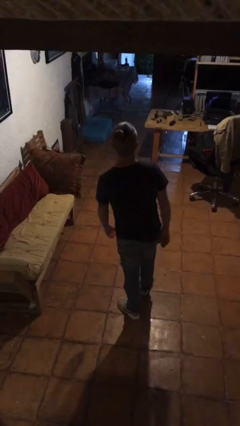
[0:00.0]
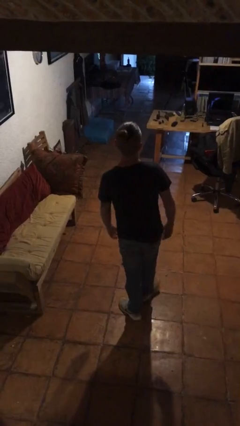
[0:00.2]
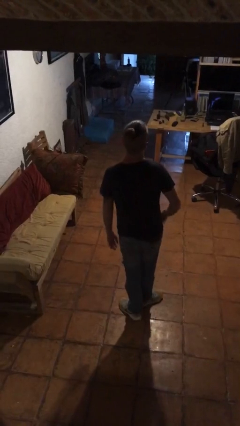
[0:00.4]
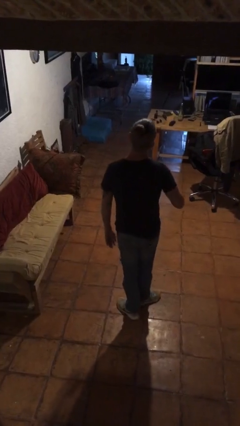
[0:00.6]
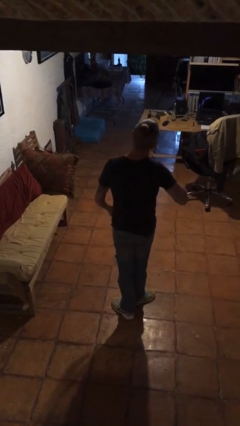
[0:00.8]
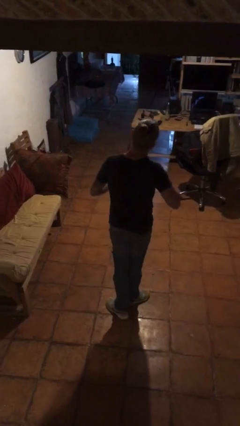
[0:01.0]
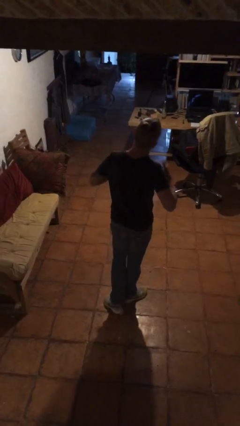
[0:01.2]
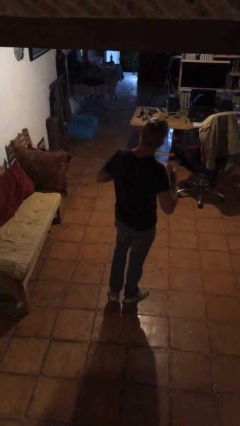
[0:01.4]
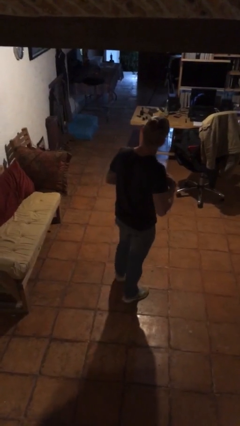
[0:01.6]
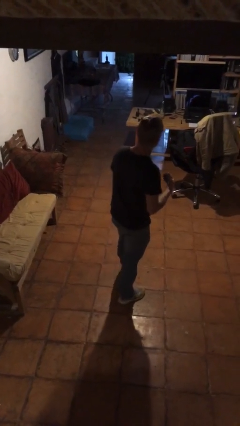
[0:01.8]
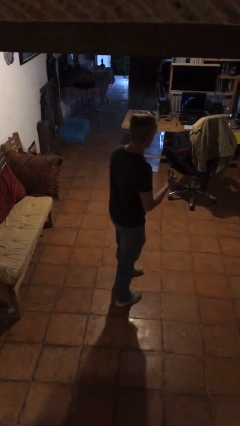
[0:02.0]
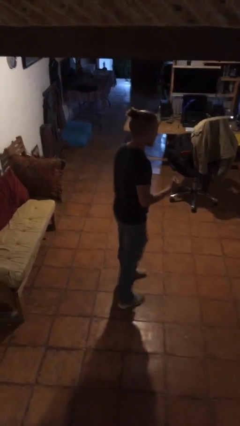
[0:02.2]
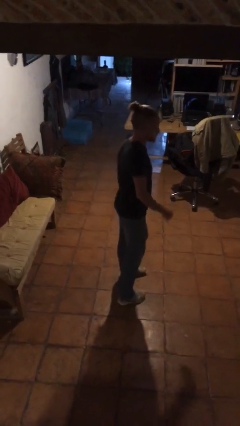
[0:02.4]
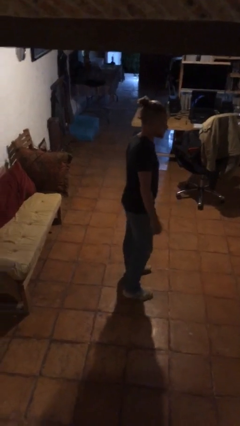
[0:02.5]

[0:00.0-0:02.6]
person drums on chest

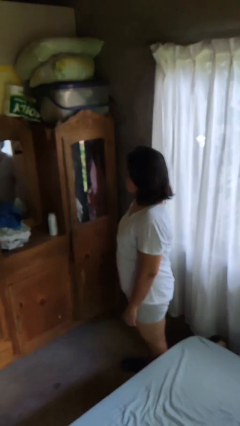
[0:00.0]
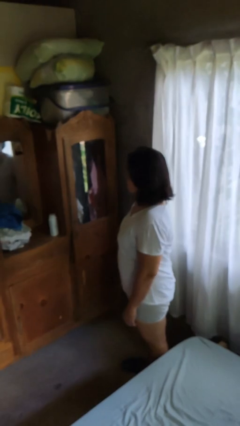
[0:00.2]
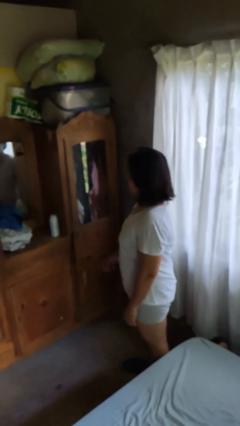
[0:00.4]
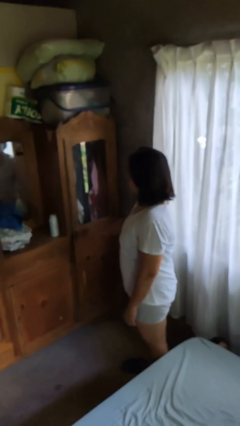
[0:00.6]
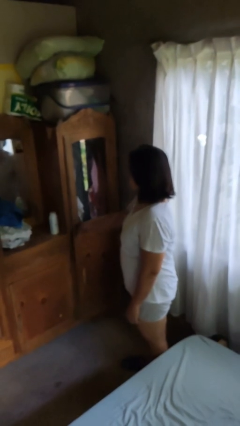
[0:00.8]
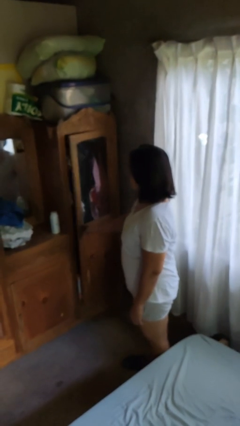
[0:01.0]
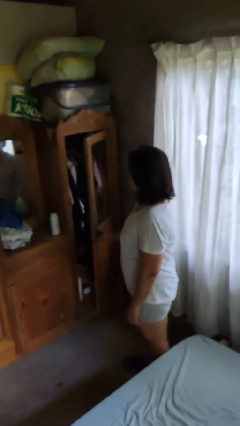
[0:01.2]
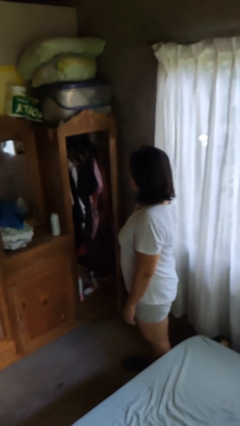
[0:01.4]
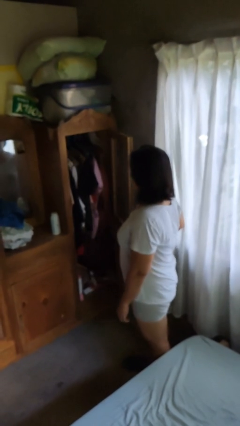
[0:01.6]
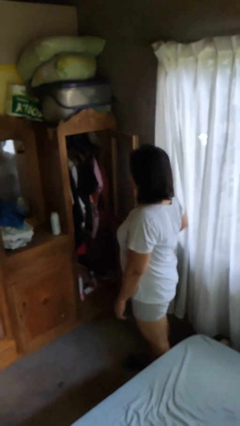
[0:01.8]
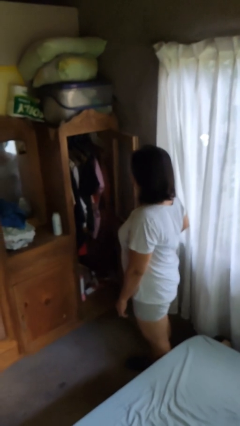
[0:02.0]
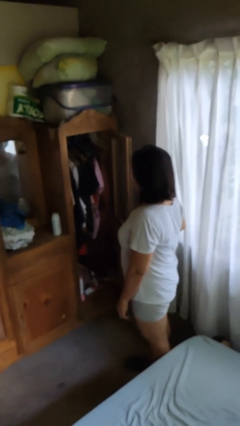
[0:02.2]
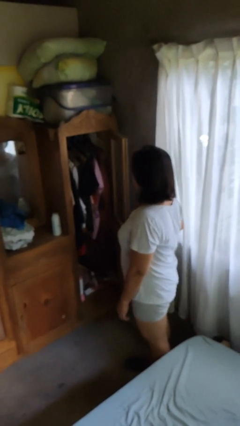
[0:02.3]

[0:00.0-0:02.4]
person opens dresser drawer

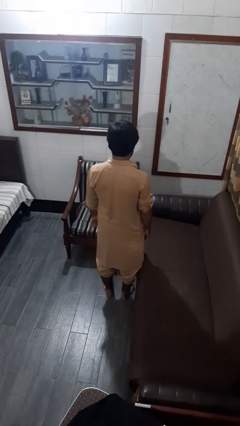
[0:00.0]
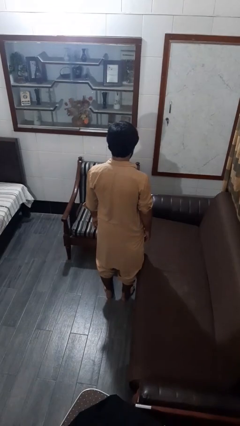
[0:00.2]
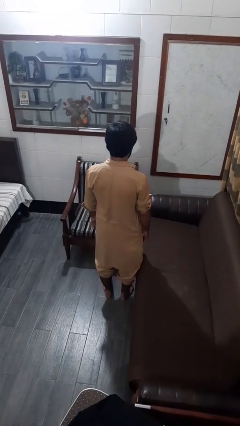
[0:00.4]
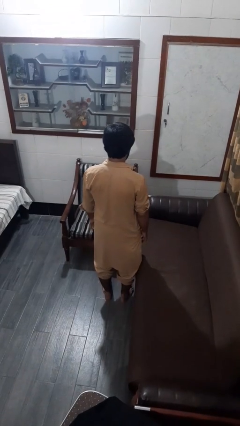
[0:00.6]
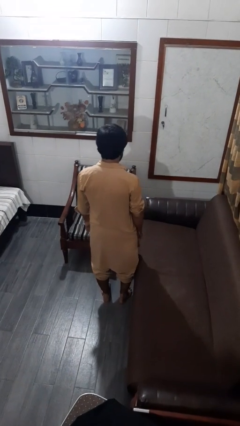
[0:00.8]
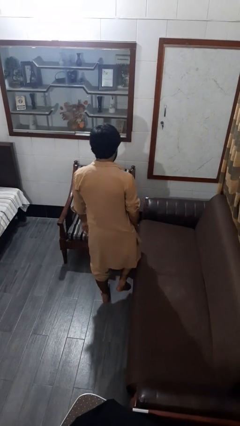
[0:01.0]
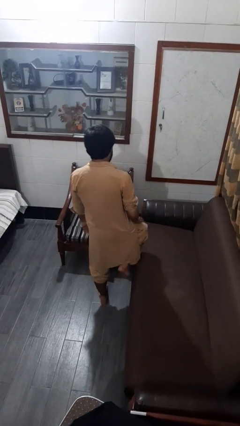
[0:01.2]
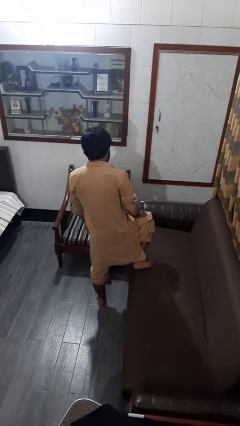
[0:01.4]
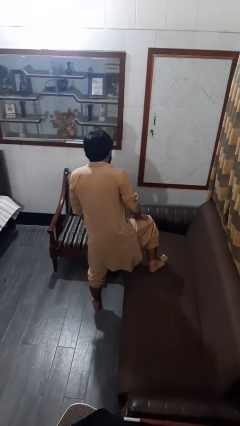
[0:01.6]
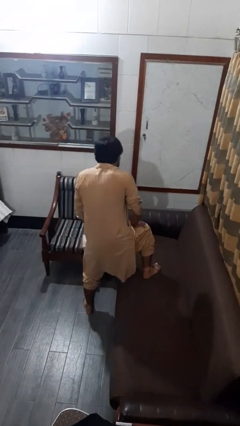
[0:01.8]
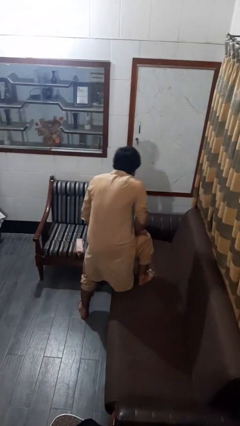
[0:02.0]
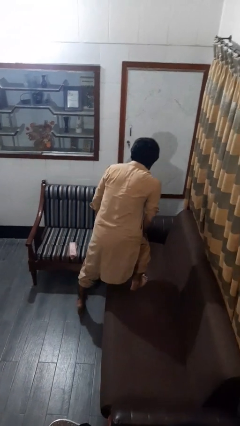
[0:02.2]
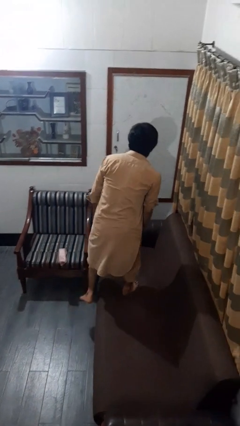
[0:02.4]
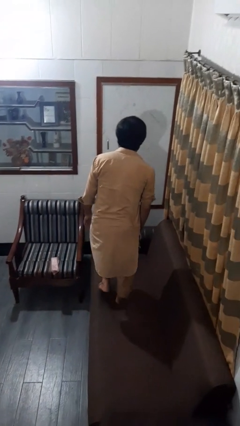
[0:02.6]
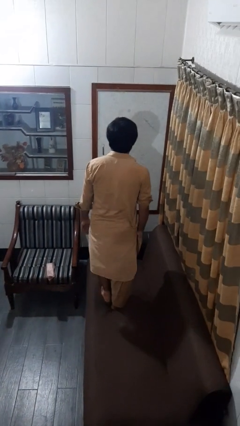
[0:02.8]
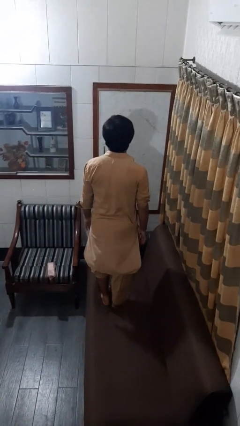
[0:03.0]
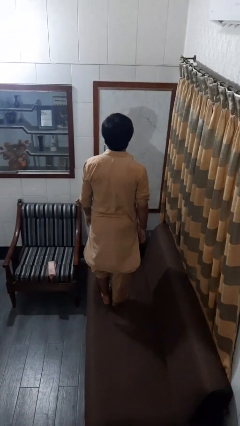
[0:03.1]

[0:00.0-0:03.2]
person climbs on couch

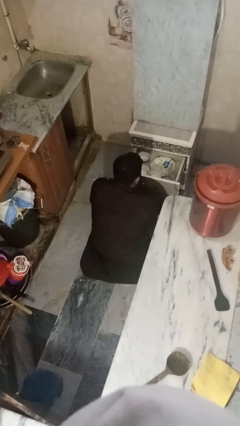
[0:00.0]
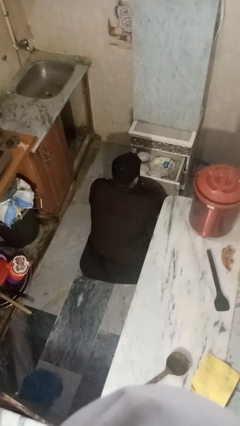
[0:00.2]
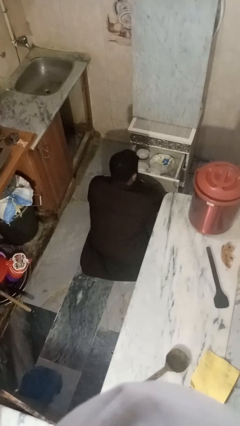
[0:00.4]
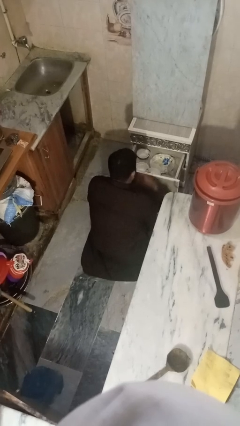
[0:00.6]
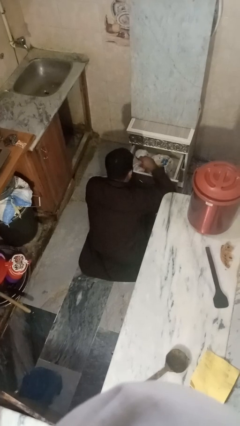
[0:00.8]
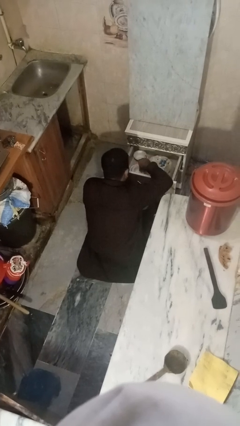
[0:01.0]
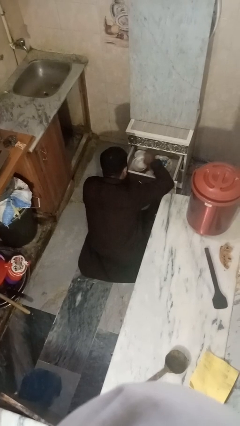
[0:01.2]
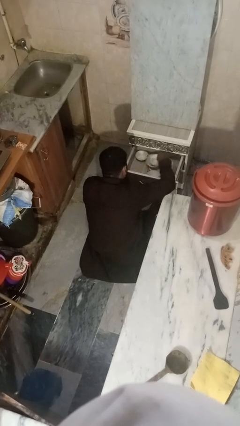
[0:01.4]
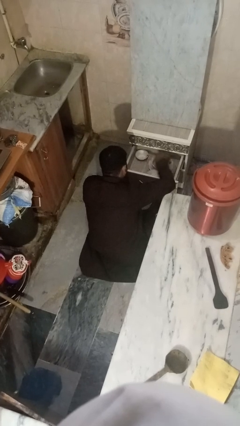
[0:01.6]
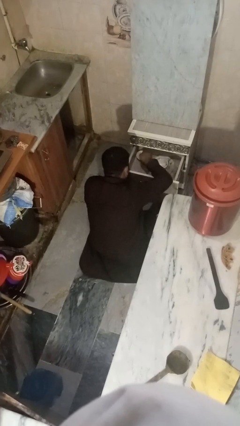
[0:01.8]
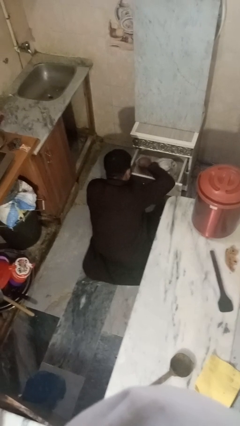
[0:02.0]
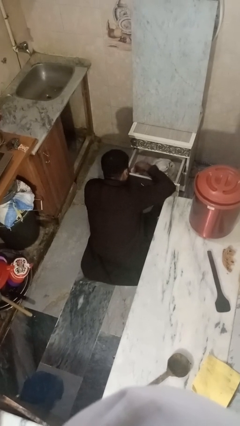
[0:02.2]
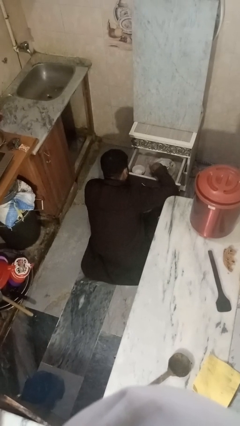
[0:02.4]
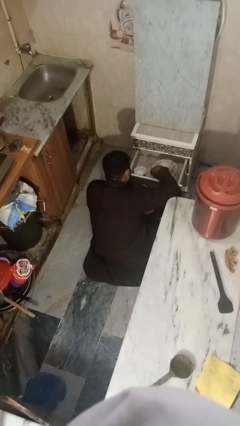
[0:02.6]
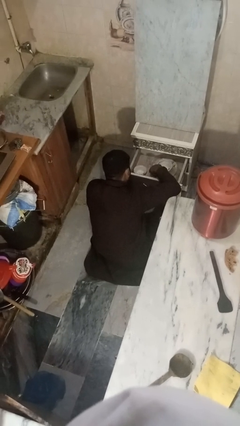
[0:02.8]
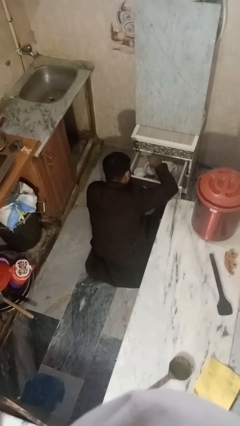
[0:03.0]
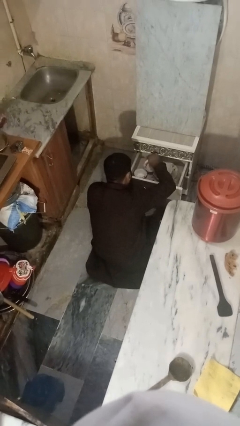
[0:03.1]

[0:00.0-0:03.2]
person searches in kitchen drawer

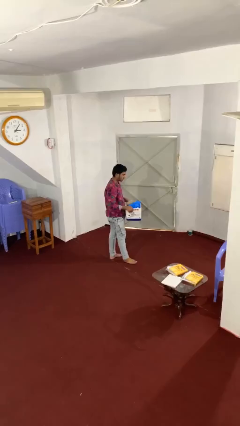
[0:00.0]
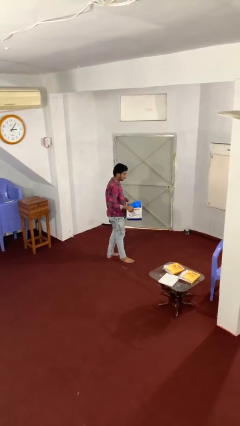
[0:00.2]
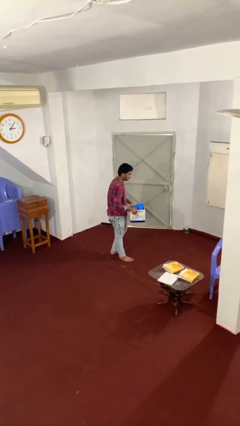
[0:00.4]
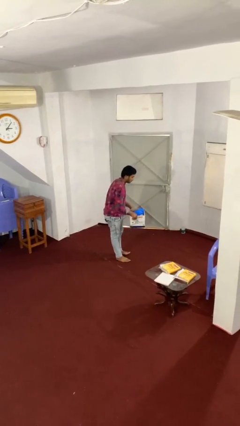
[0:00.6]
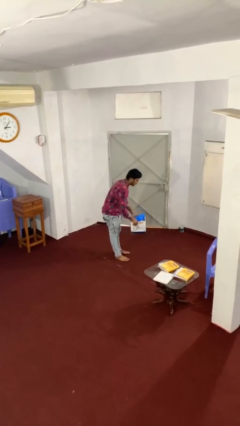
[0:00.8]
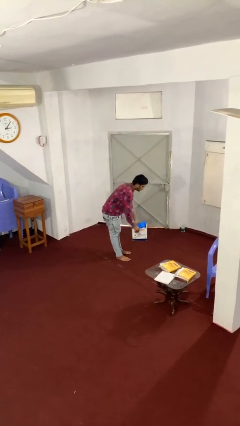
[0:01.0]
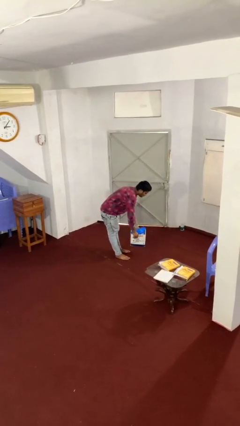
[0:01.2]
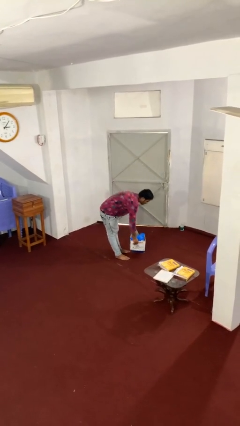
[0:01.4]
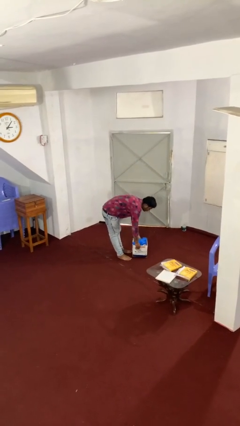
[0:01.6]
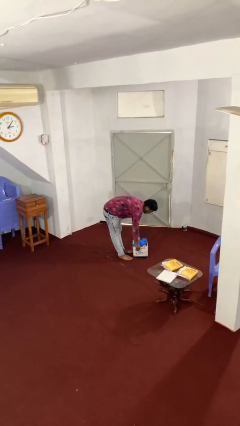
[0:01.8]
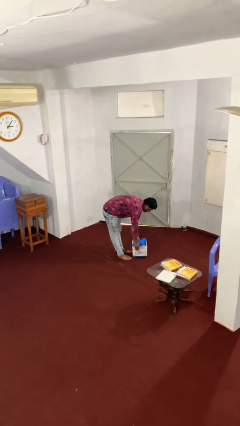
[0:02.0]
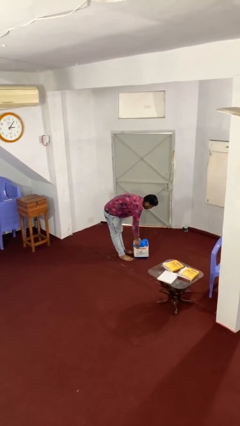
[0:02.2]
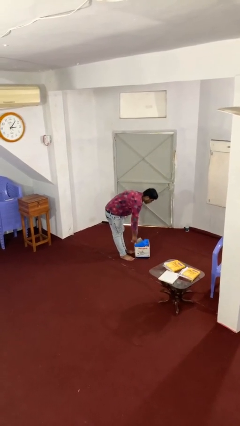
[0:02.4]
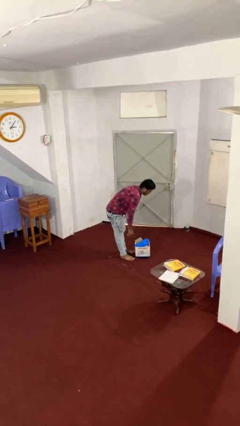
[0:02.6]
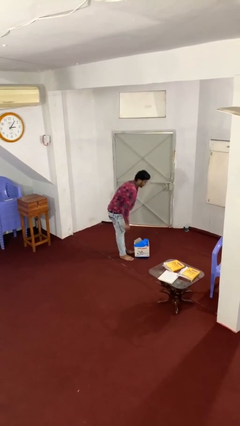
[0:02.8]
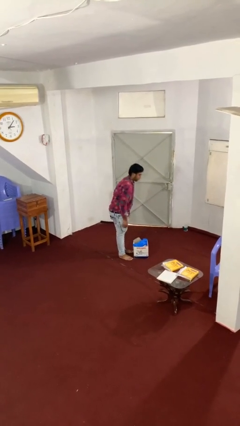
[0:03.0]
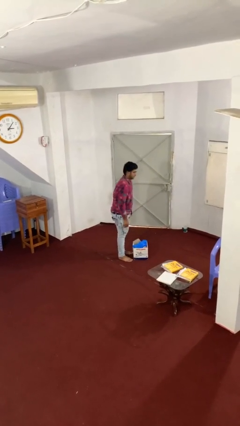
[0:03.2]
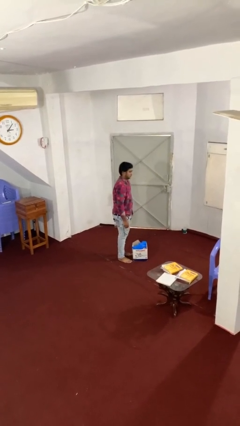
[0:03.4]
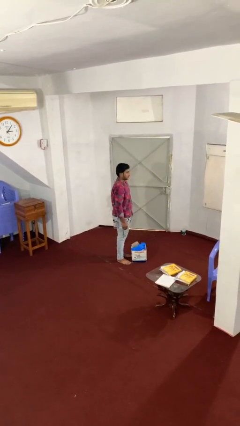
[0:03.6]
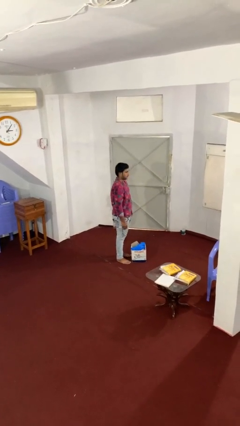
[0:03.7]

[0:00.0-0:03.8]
person puts down object on floor

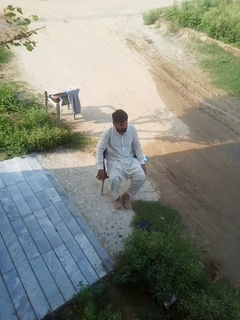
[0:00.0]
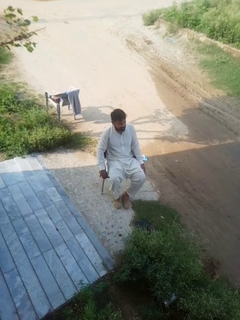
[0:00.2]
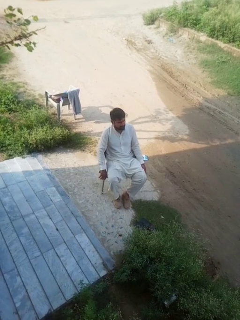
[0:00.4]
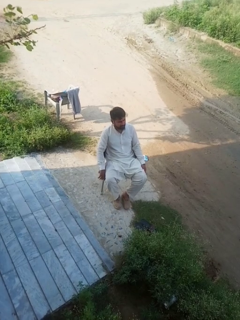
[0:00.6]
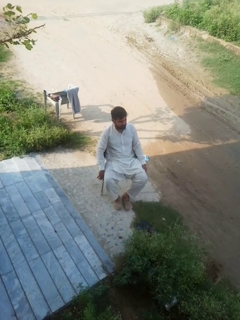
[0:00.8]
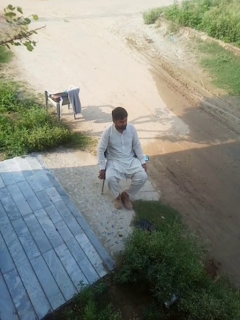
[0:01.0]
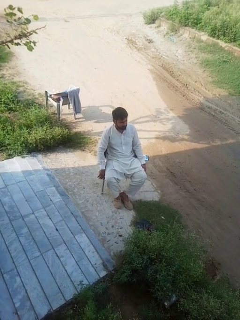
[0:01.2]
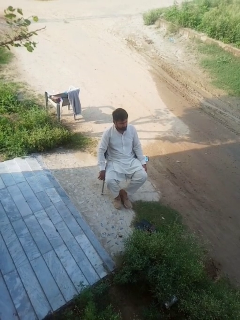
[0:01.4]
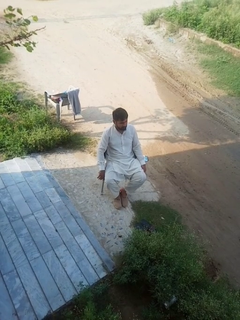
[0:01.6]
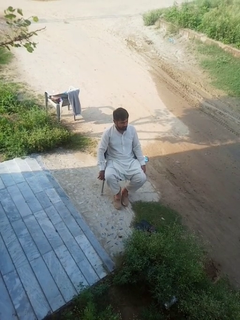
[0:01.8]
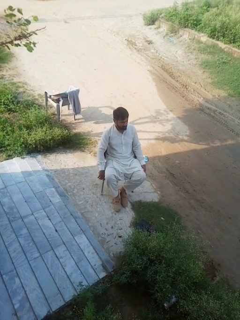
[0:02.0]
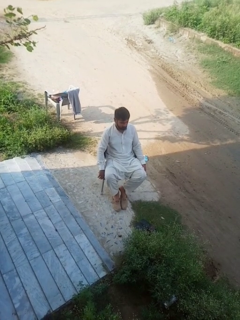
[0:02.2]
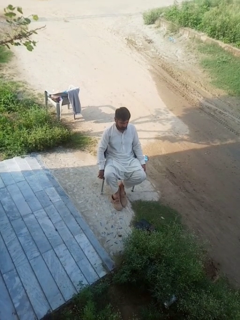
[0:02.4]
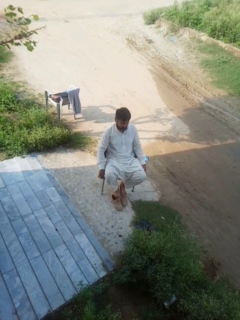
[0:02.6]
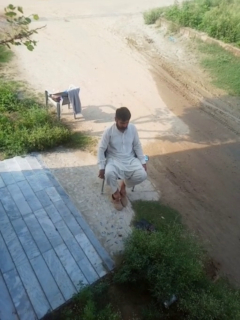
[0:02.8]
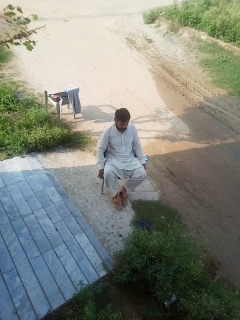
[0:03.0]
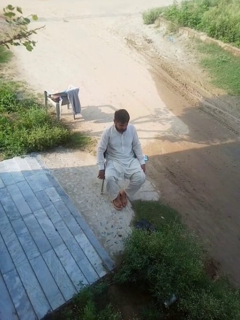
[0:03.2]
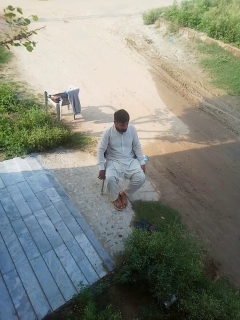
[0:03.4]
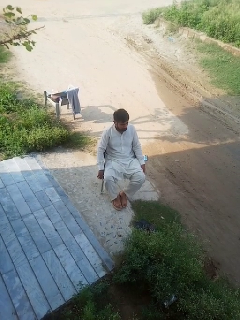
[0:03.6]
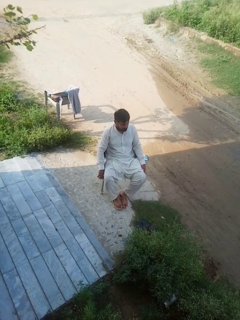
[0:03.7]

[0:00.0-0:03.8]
person takes off shoes
